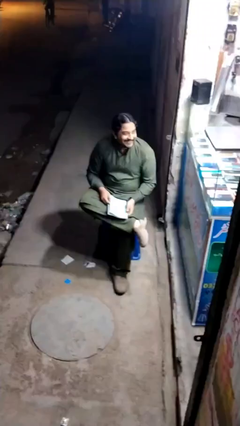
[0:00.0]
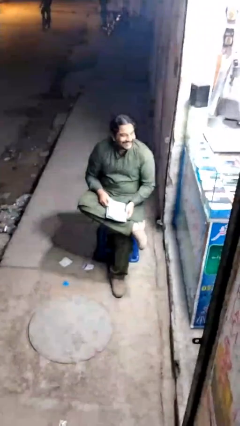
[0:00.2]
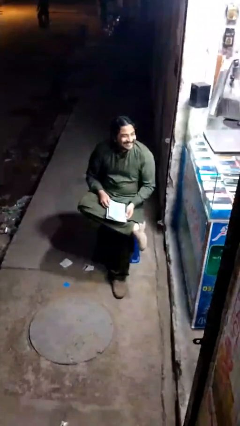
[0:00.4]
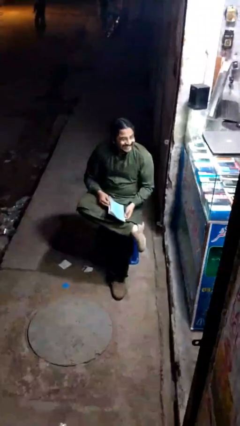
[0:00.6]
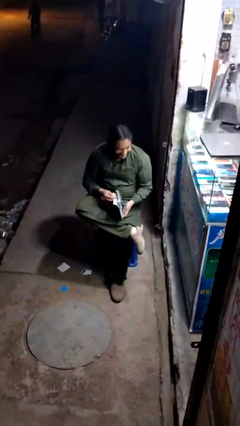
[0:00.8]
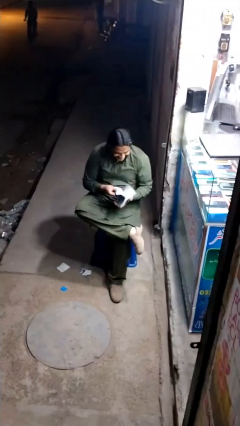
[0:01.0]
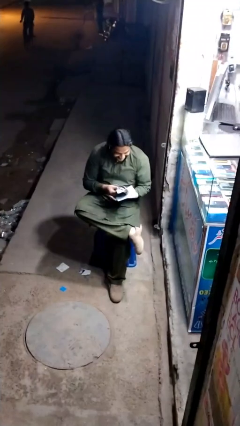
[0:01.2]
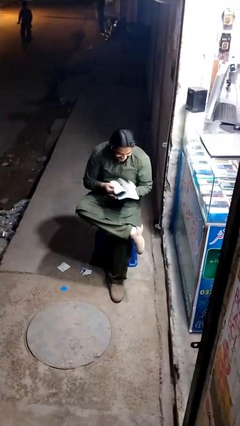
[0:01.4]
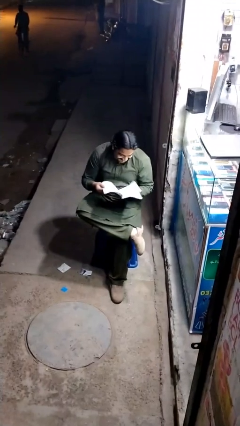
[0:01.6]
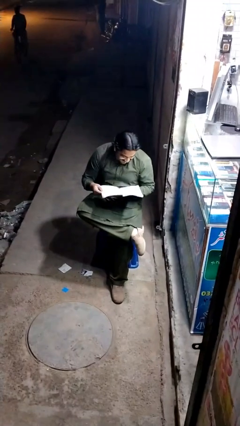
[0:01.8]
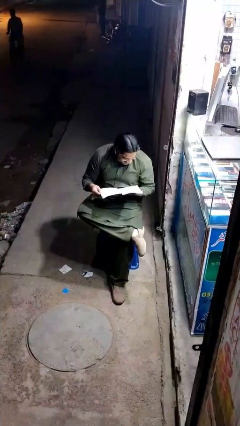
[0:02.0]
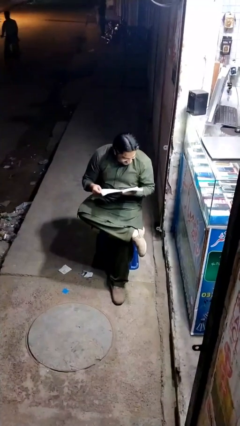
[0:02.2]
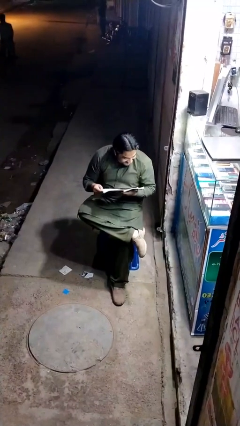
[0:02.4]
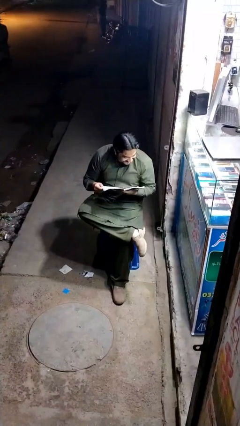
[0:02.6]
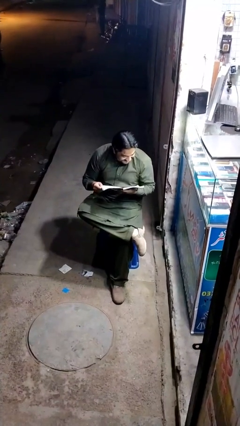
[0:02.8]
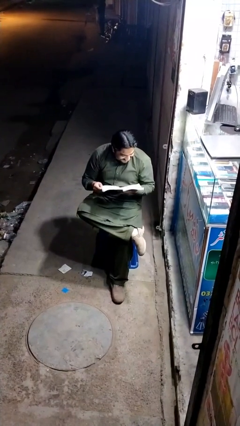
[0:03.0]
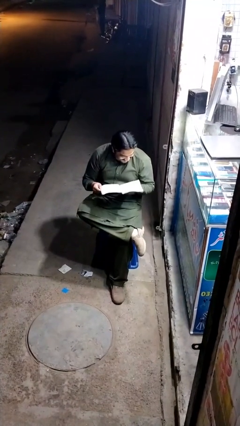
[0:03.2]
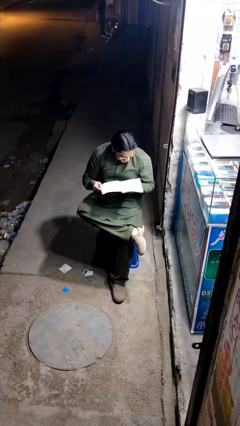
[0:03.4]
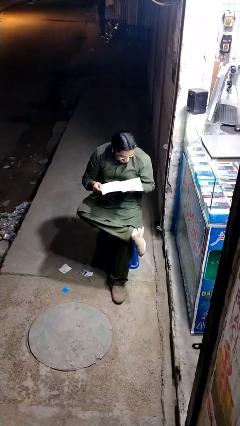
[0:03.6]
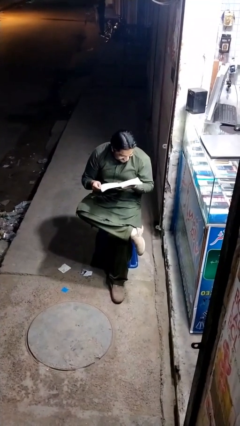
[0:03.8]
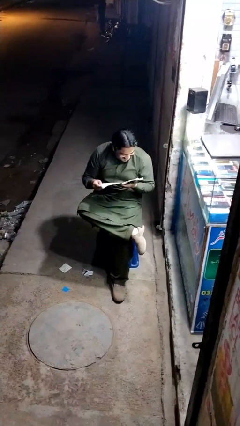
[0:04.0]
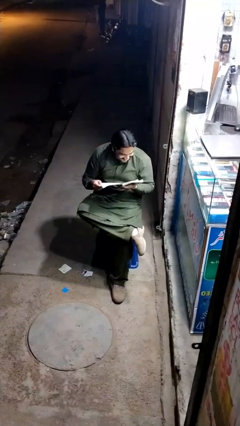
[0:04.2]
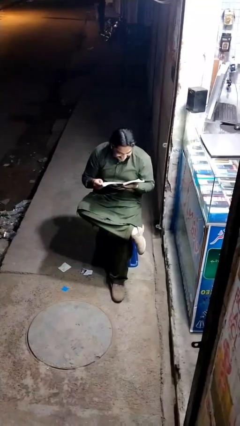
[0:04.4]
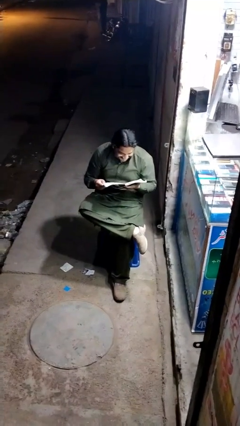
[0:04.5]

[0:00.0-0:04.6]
person reads document

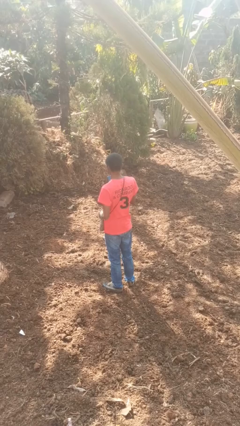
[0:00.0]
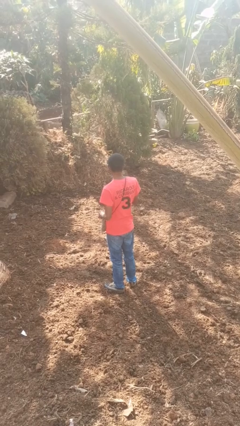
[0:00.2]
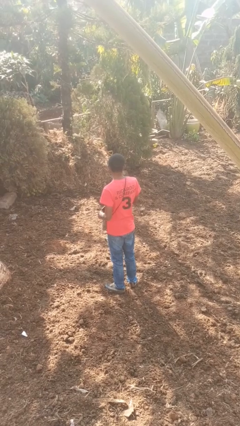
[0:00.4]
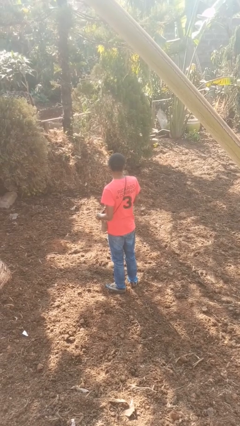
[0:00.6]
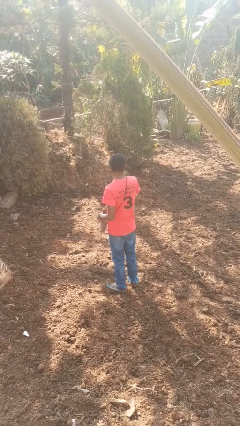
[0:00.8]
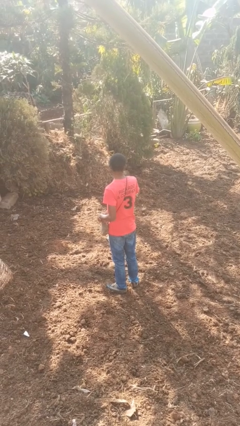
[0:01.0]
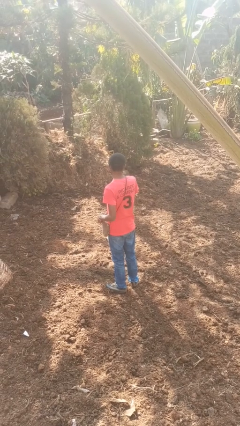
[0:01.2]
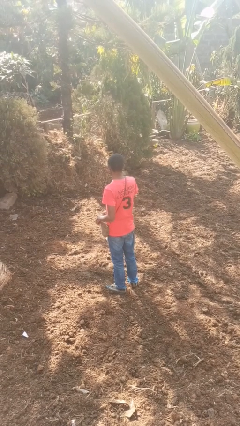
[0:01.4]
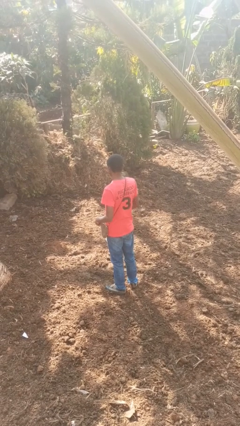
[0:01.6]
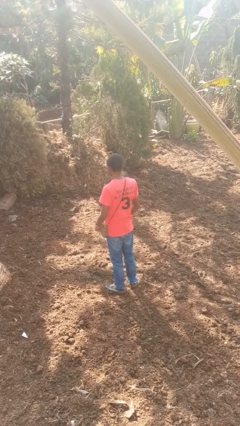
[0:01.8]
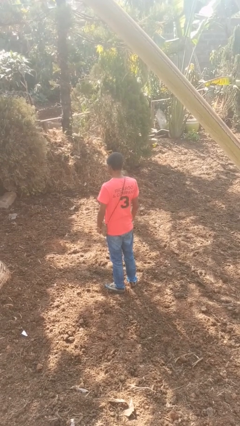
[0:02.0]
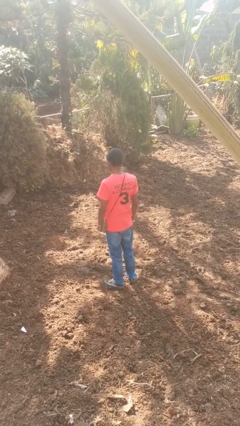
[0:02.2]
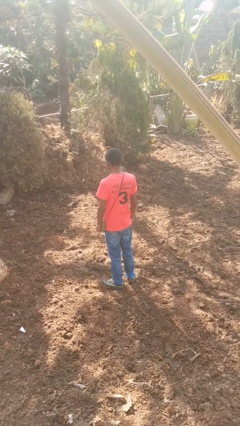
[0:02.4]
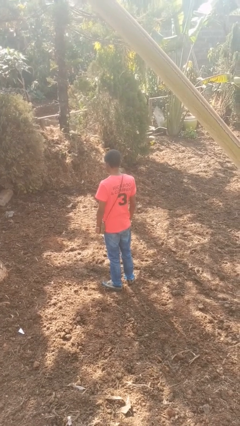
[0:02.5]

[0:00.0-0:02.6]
person puts object into purse

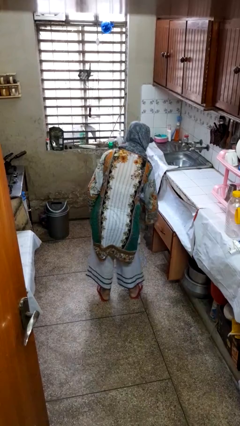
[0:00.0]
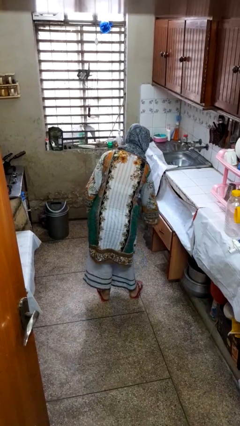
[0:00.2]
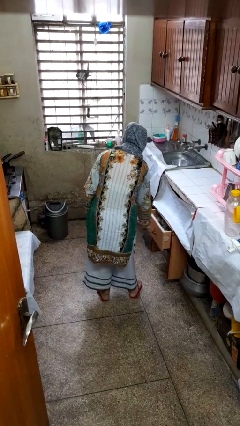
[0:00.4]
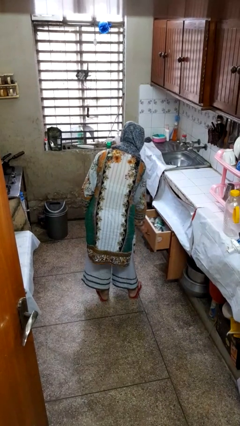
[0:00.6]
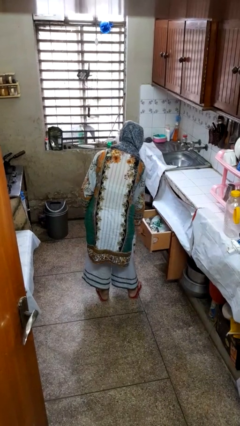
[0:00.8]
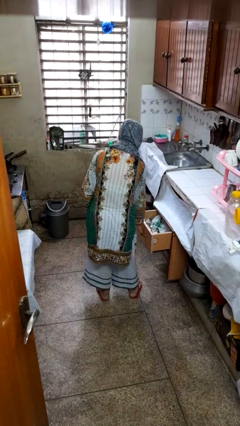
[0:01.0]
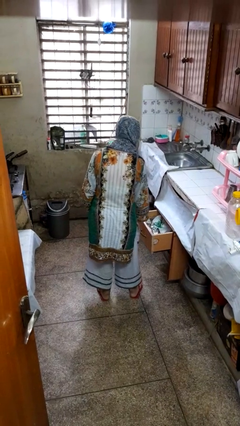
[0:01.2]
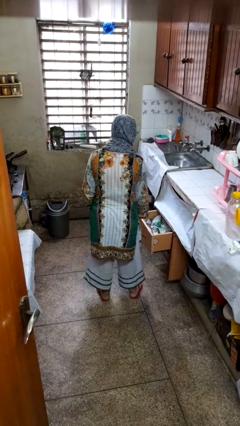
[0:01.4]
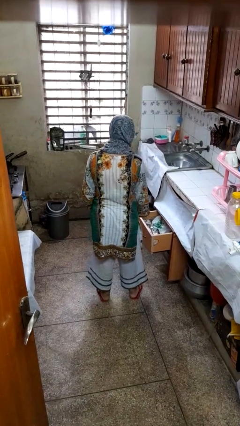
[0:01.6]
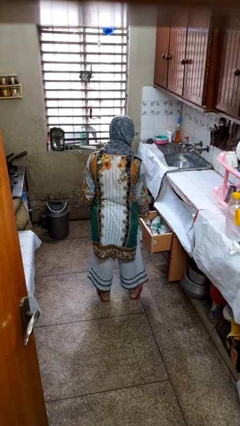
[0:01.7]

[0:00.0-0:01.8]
person opens kitchen drawer

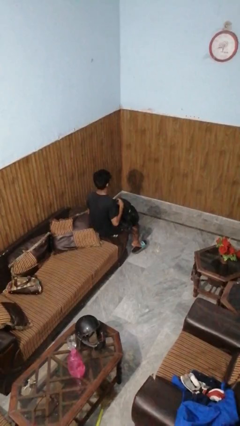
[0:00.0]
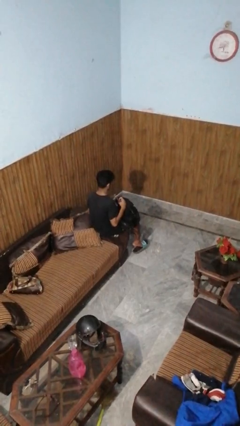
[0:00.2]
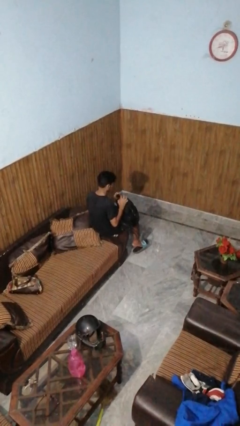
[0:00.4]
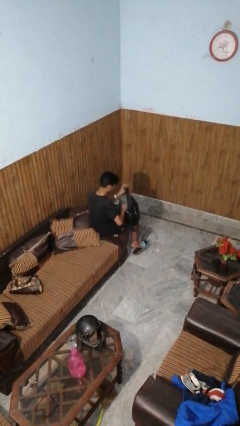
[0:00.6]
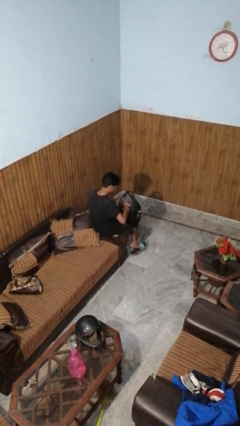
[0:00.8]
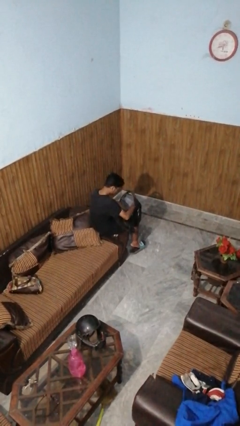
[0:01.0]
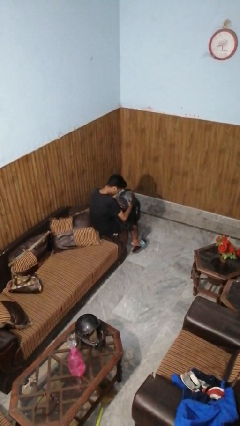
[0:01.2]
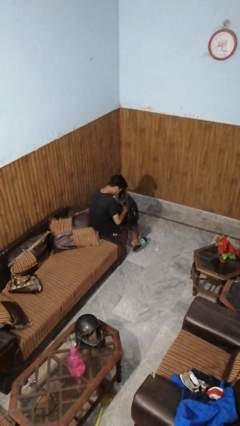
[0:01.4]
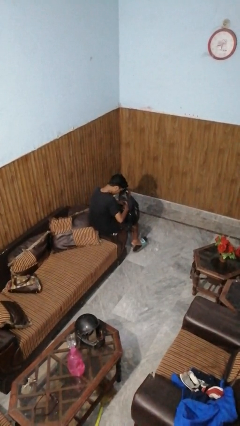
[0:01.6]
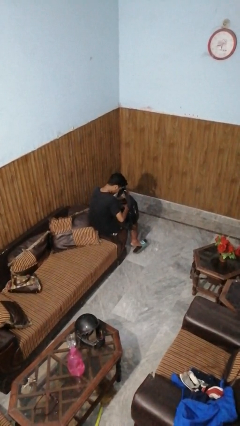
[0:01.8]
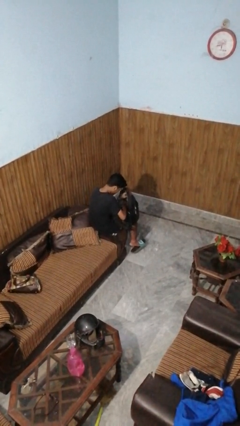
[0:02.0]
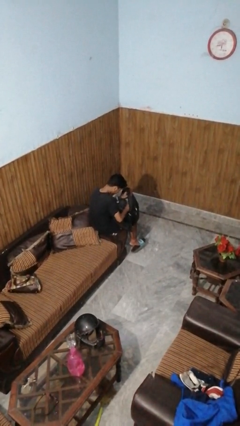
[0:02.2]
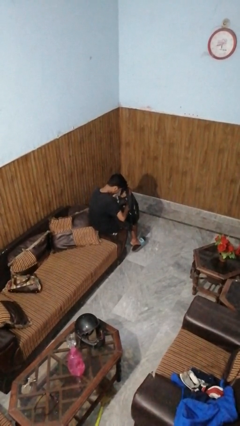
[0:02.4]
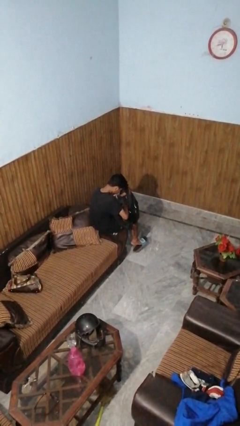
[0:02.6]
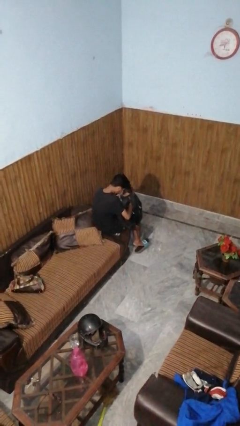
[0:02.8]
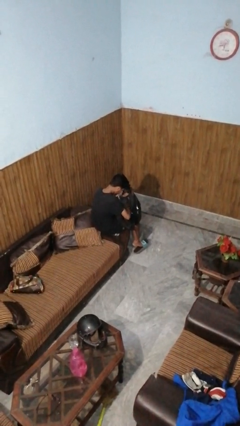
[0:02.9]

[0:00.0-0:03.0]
person searches in backpack

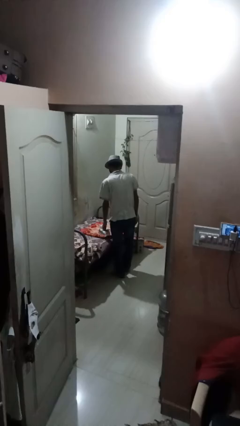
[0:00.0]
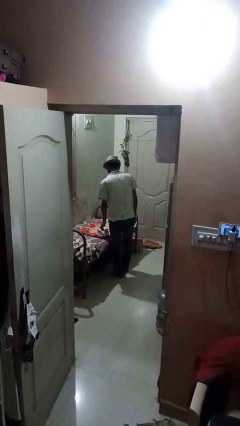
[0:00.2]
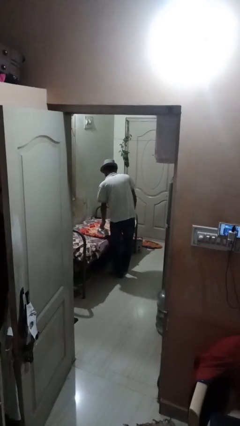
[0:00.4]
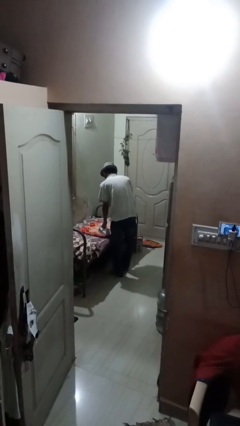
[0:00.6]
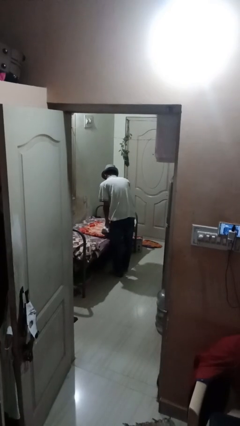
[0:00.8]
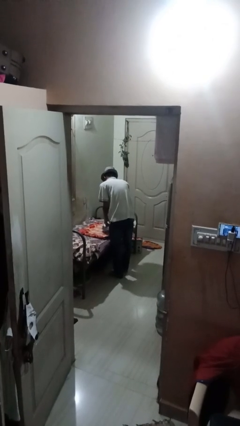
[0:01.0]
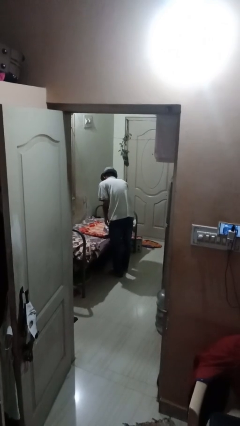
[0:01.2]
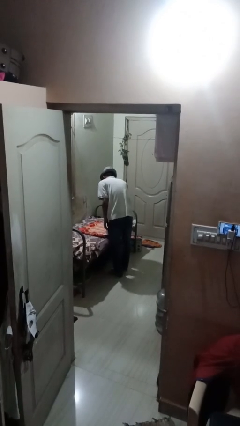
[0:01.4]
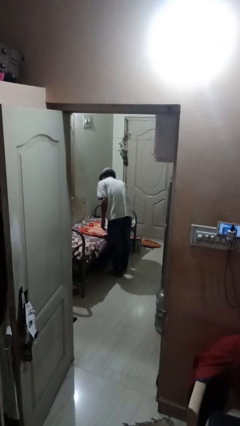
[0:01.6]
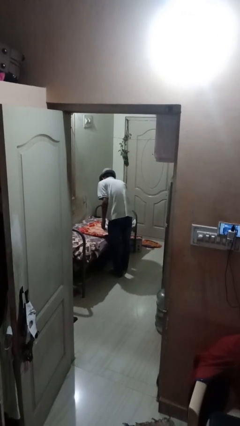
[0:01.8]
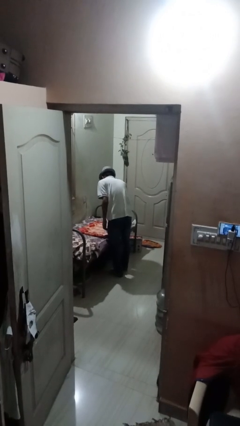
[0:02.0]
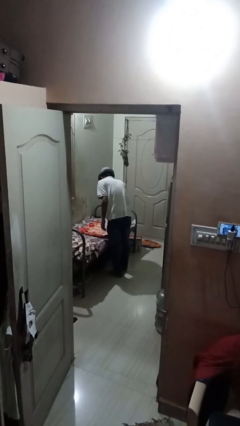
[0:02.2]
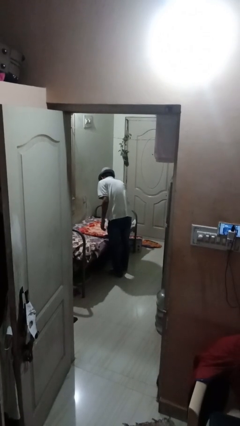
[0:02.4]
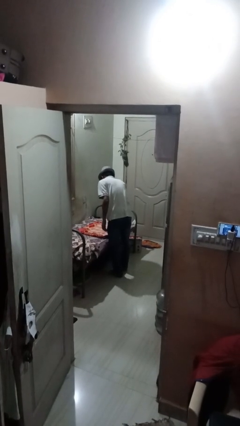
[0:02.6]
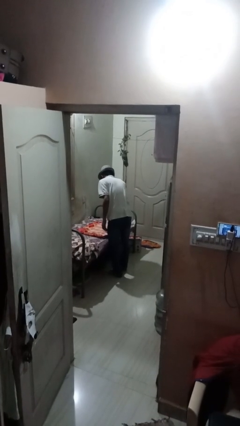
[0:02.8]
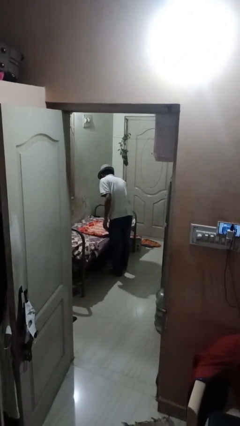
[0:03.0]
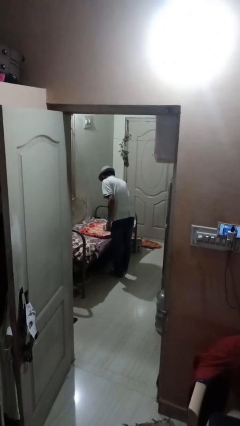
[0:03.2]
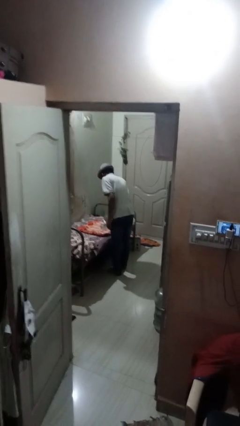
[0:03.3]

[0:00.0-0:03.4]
person irons clothes

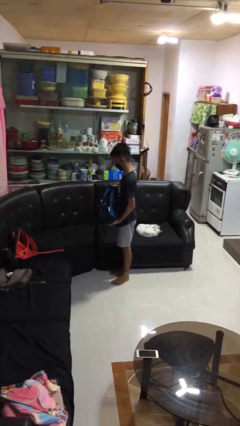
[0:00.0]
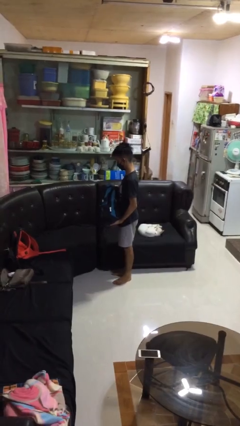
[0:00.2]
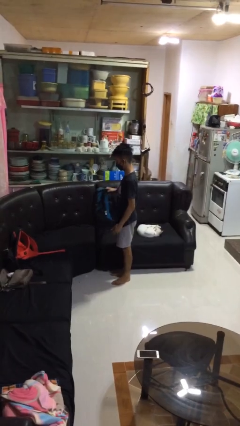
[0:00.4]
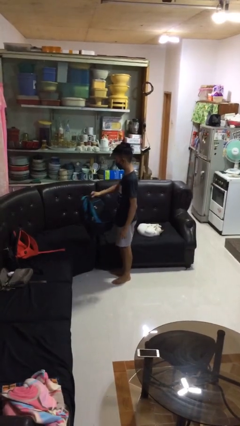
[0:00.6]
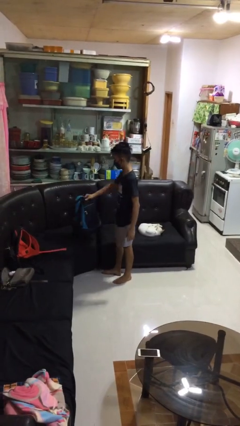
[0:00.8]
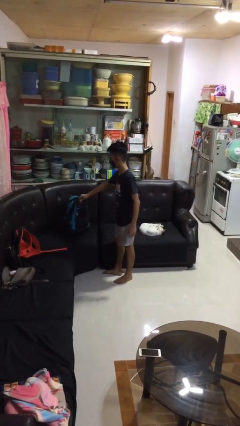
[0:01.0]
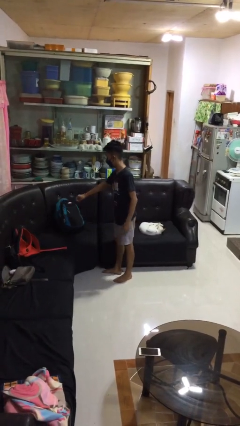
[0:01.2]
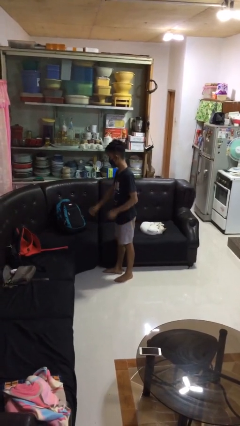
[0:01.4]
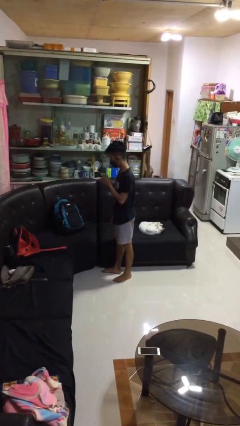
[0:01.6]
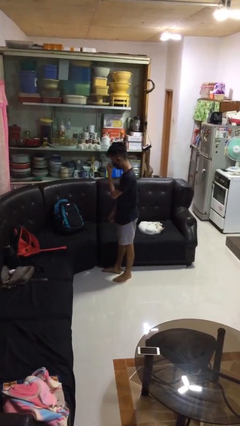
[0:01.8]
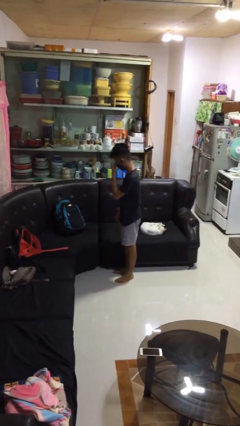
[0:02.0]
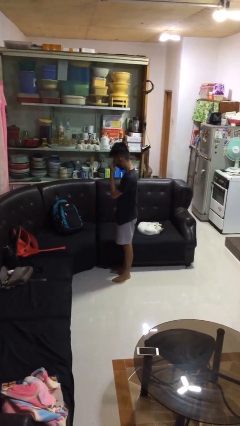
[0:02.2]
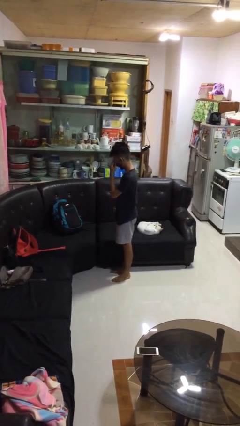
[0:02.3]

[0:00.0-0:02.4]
person puts down object on couch
